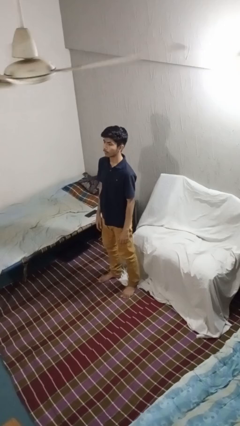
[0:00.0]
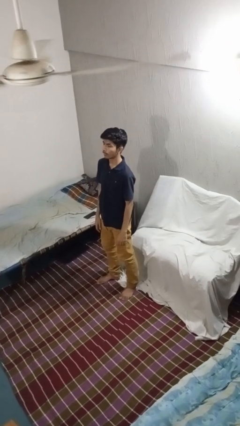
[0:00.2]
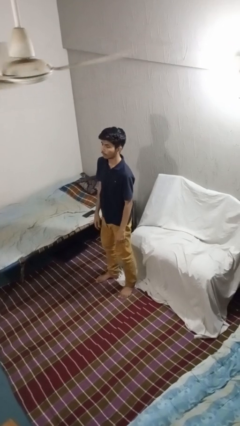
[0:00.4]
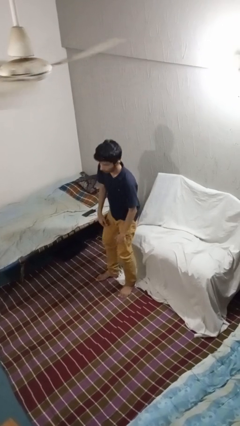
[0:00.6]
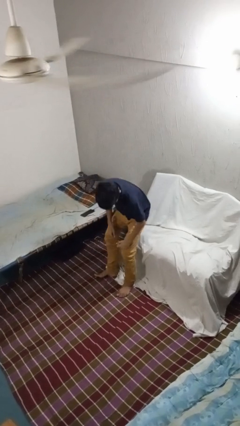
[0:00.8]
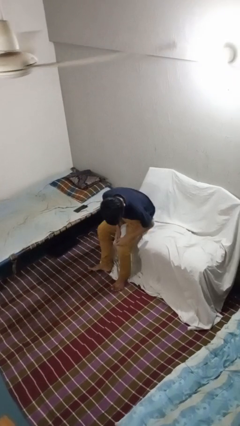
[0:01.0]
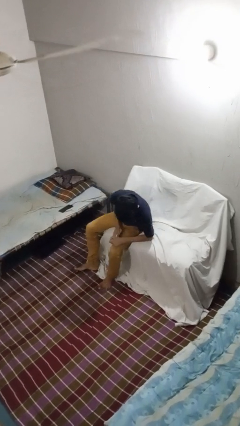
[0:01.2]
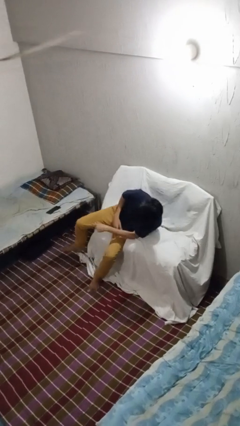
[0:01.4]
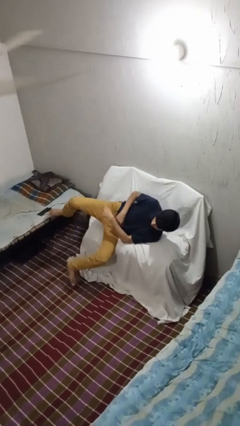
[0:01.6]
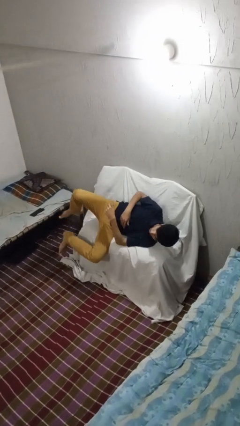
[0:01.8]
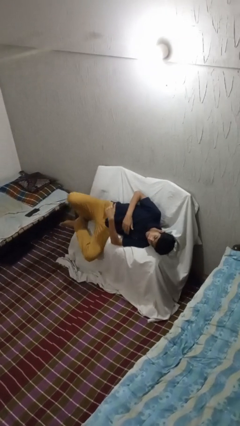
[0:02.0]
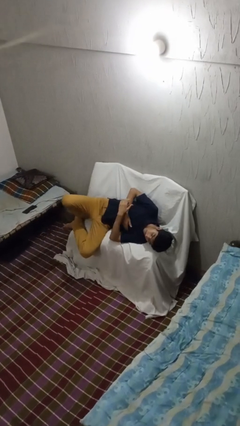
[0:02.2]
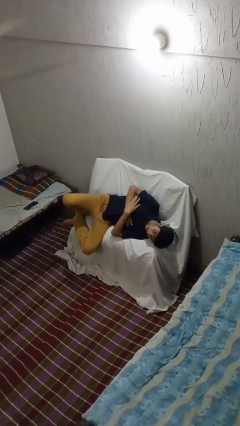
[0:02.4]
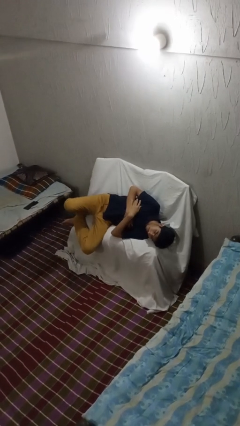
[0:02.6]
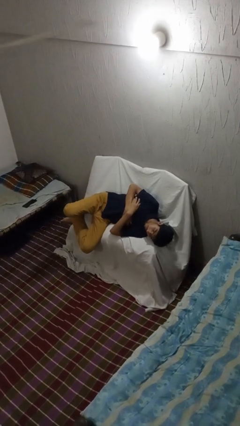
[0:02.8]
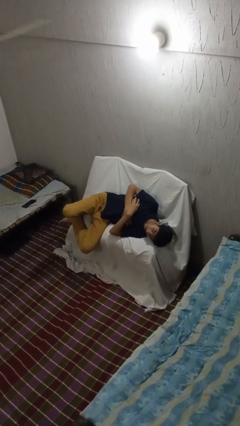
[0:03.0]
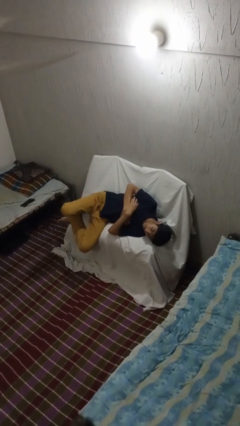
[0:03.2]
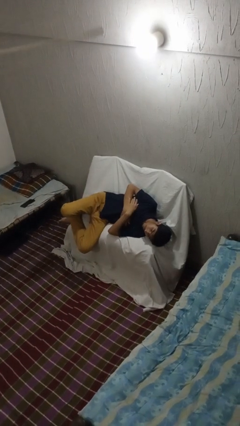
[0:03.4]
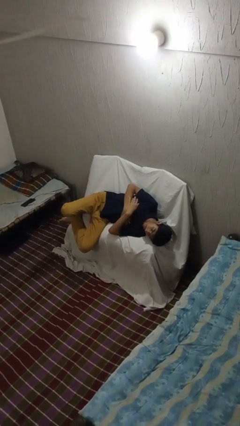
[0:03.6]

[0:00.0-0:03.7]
person lies down on couch

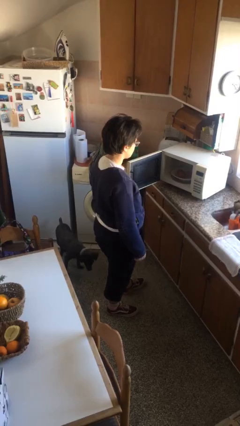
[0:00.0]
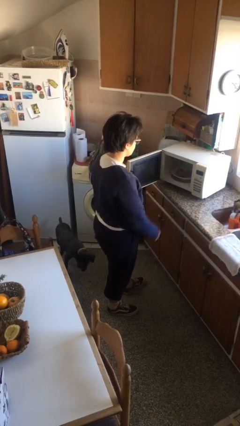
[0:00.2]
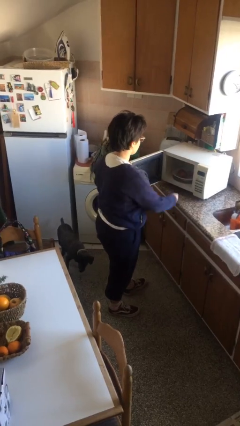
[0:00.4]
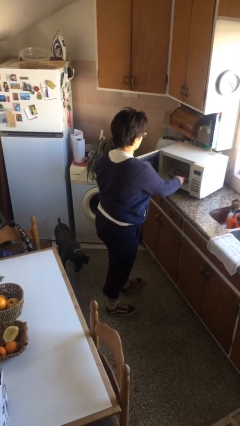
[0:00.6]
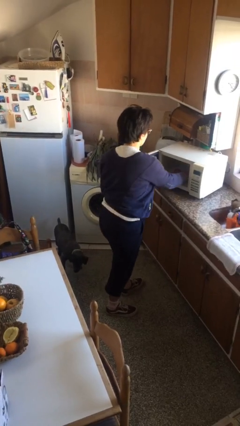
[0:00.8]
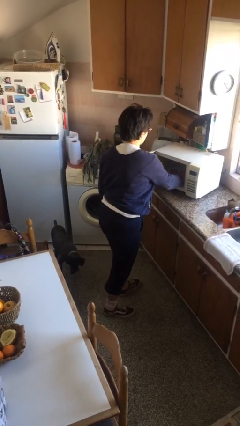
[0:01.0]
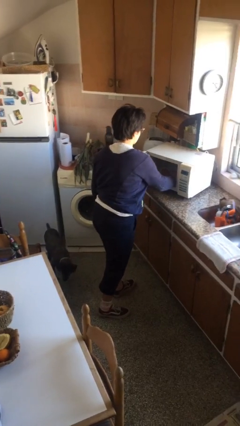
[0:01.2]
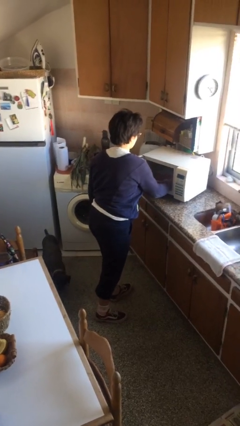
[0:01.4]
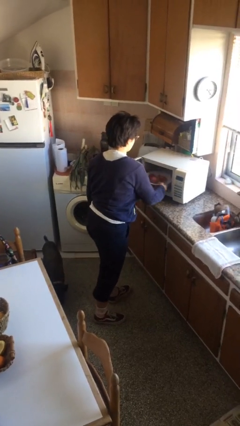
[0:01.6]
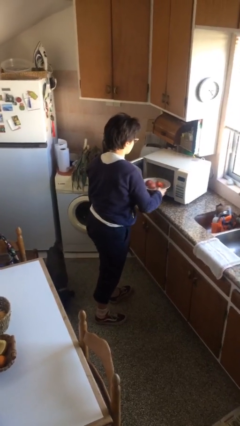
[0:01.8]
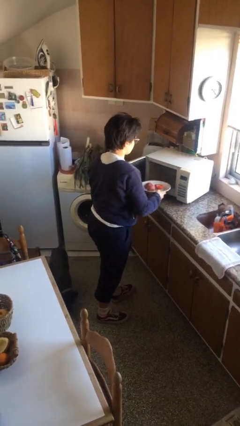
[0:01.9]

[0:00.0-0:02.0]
person takes object from microwave

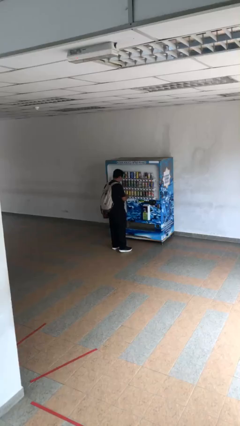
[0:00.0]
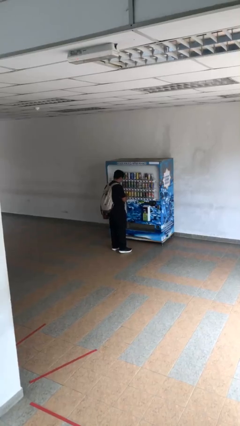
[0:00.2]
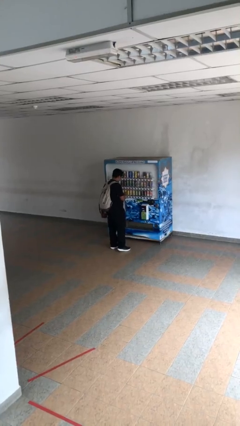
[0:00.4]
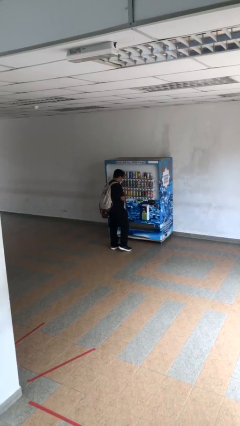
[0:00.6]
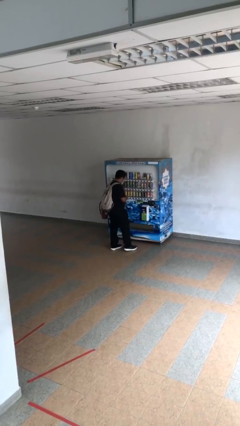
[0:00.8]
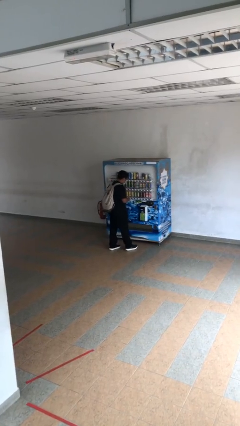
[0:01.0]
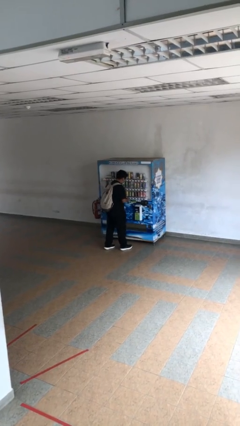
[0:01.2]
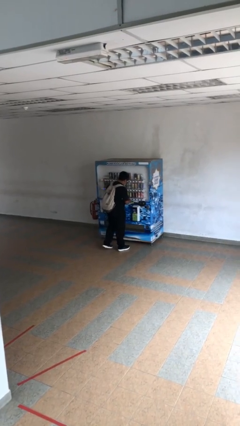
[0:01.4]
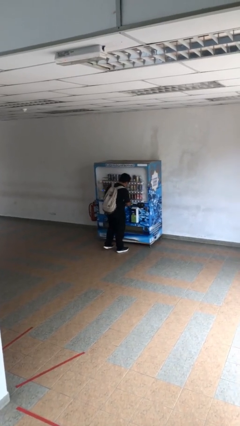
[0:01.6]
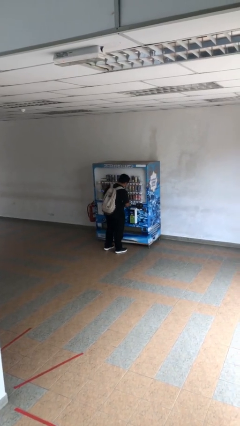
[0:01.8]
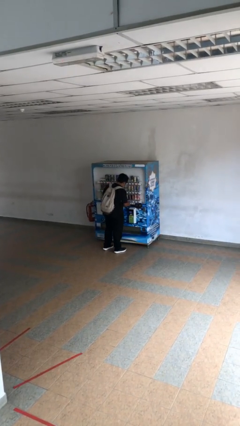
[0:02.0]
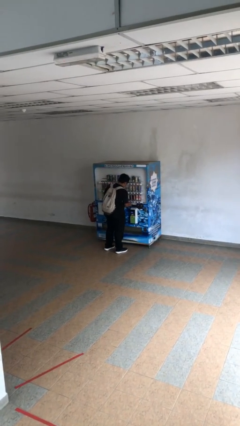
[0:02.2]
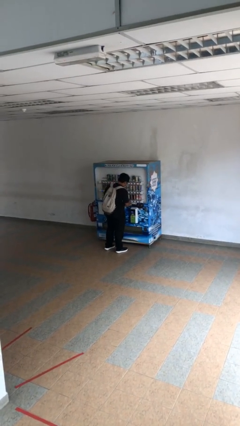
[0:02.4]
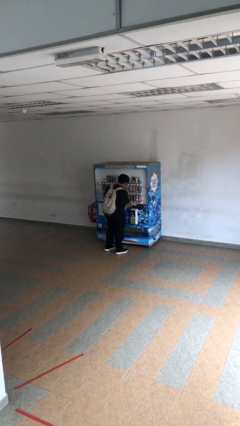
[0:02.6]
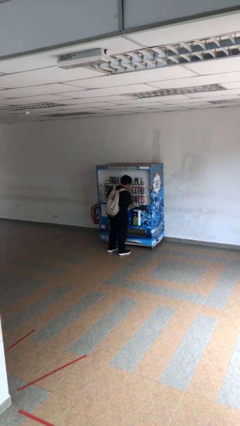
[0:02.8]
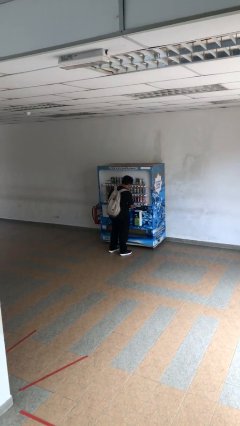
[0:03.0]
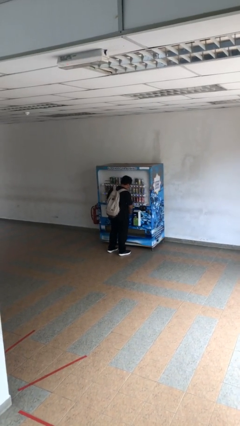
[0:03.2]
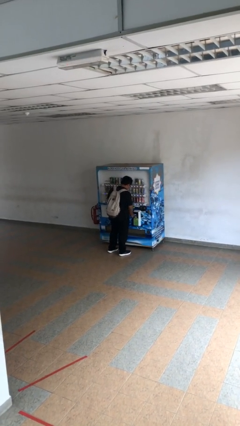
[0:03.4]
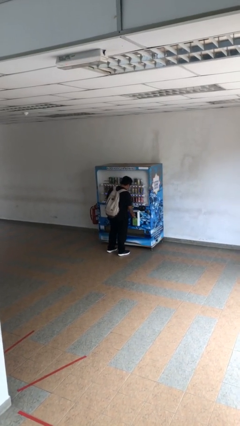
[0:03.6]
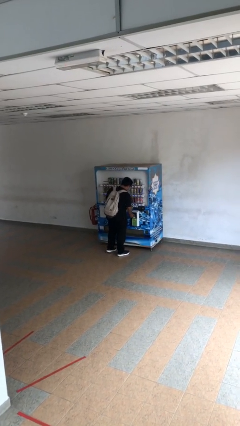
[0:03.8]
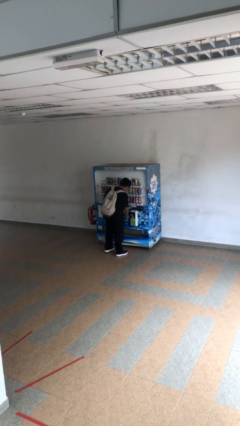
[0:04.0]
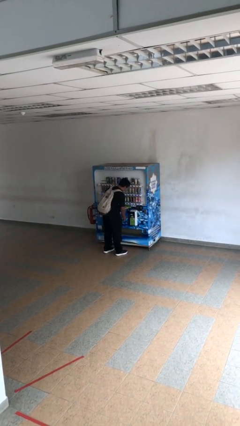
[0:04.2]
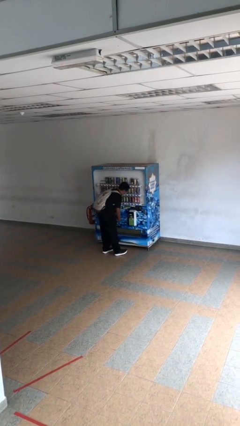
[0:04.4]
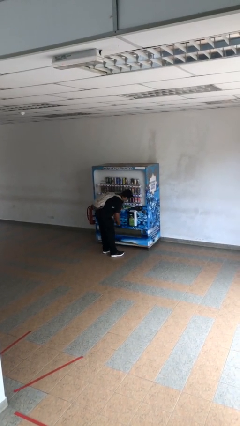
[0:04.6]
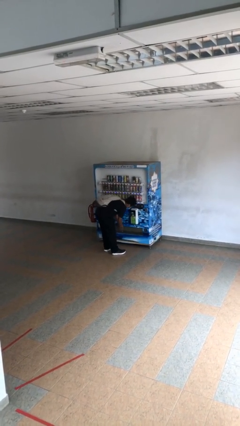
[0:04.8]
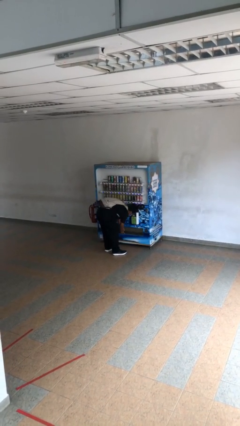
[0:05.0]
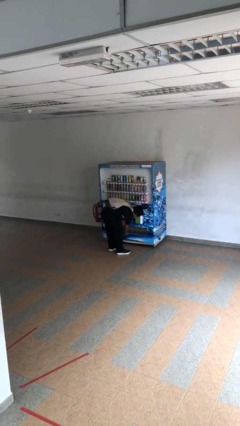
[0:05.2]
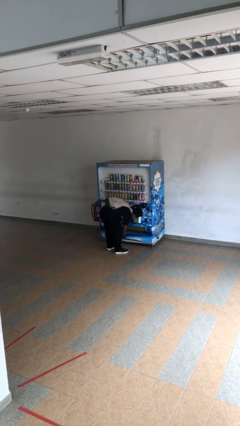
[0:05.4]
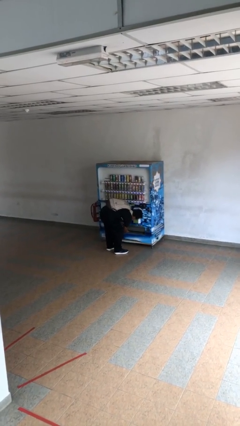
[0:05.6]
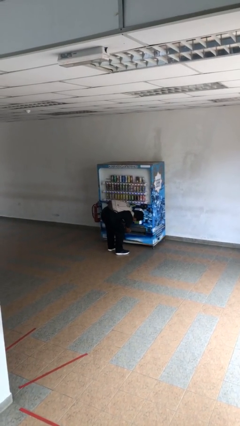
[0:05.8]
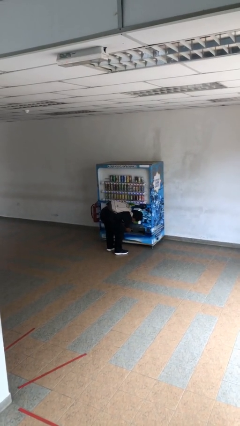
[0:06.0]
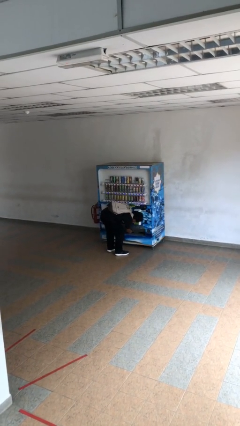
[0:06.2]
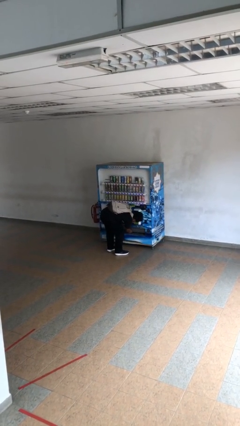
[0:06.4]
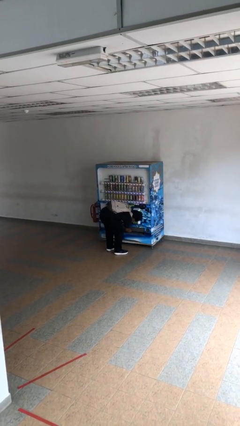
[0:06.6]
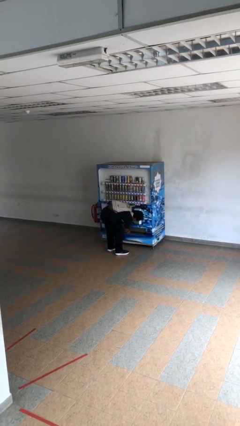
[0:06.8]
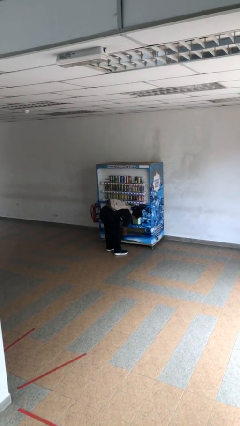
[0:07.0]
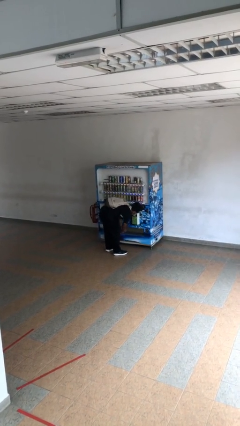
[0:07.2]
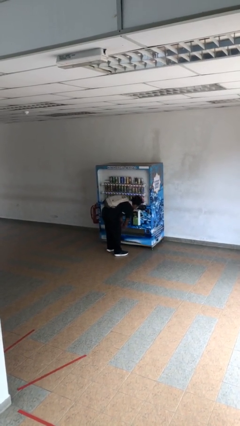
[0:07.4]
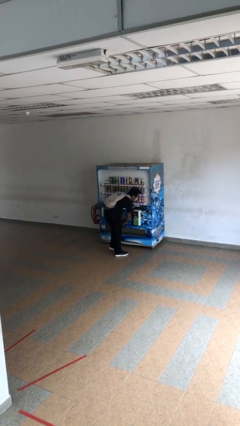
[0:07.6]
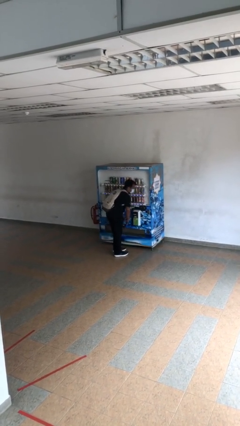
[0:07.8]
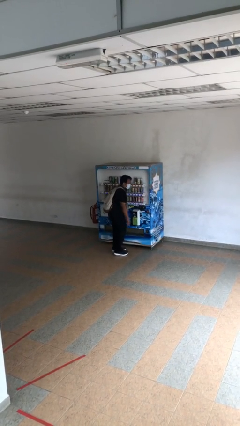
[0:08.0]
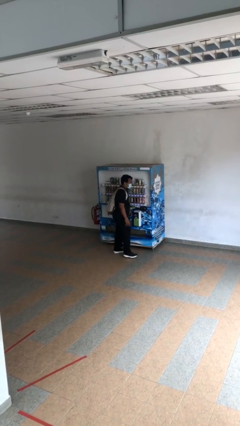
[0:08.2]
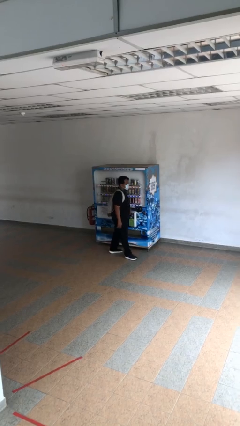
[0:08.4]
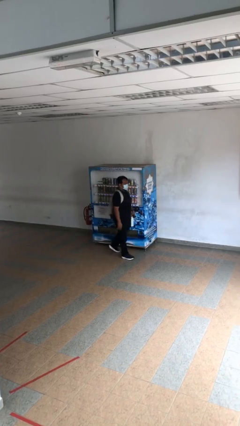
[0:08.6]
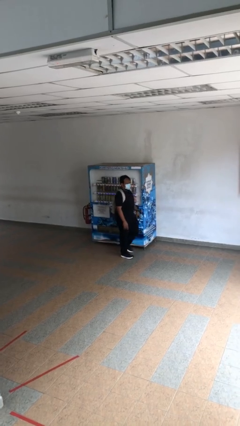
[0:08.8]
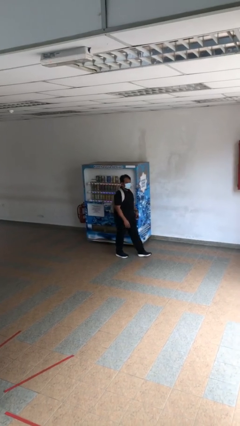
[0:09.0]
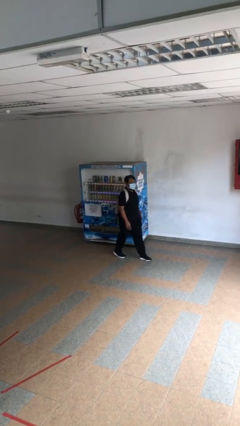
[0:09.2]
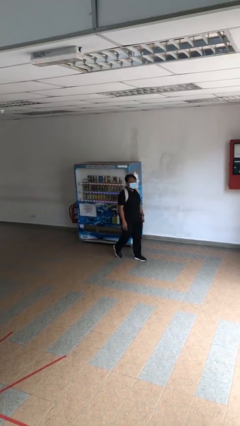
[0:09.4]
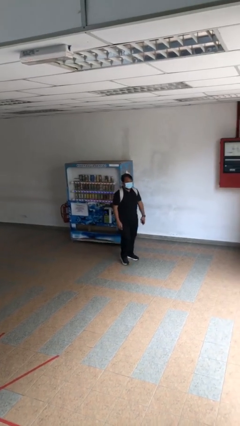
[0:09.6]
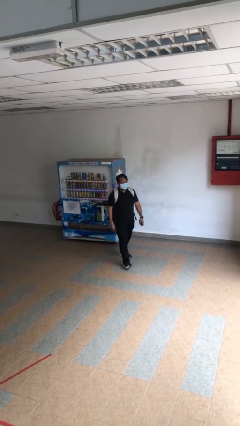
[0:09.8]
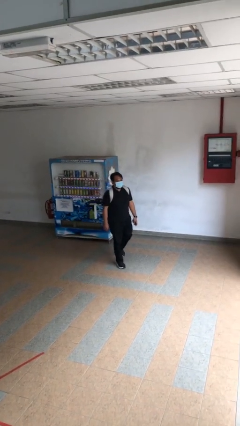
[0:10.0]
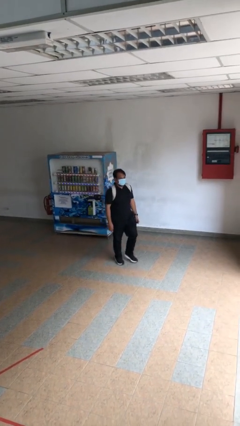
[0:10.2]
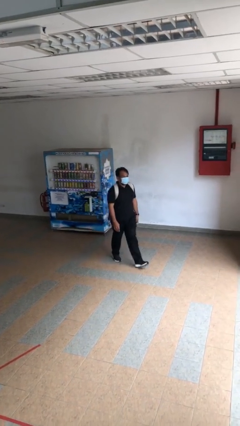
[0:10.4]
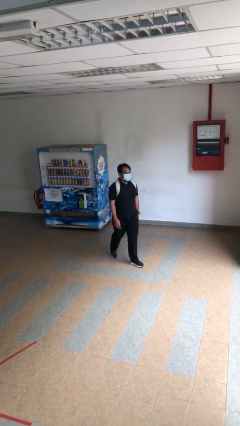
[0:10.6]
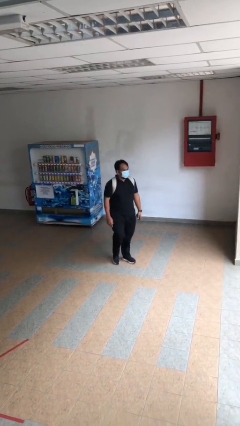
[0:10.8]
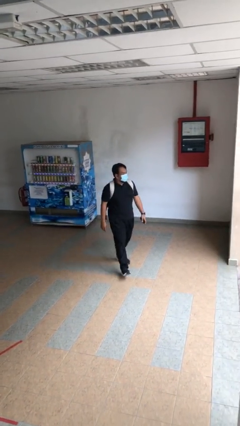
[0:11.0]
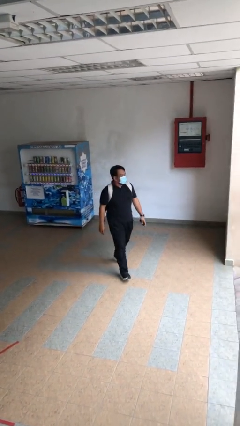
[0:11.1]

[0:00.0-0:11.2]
person purchases from machine

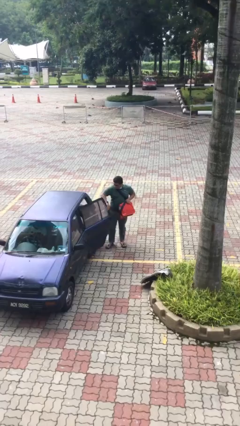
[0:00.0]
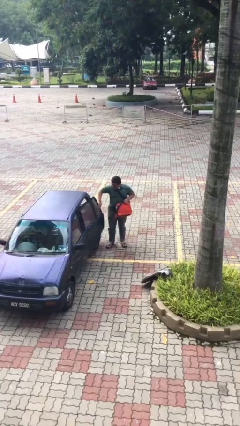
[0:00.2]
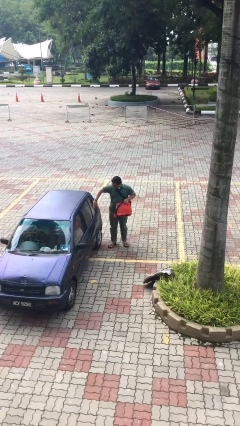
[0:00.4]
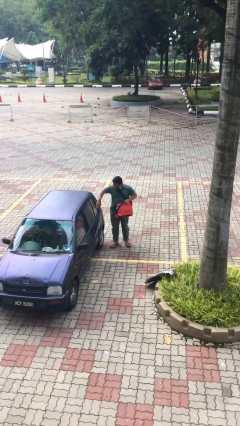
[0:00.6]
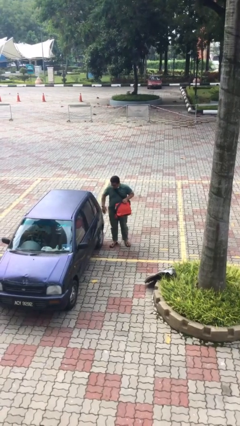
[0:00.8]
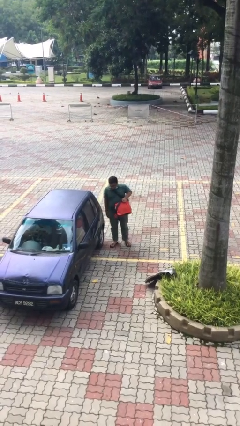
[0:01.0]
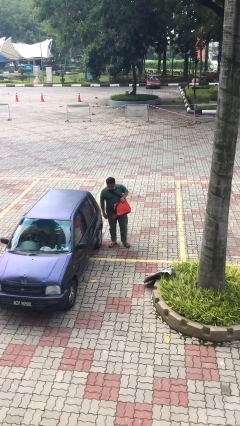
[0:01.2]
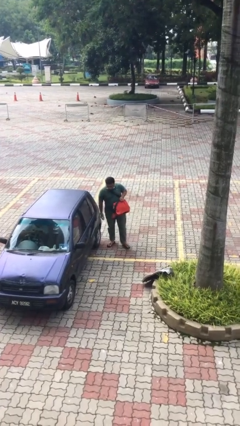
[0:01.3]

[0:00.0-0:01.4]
person closes car door
